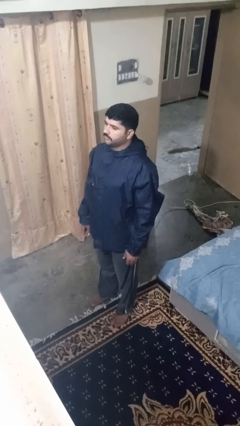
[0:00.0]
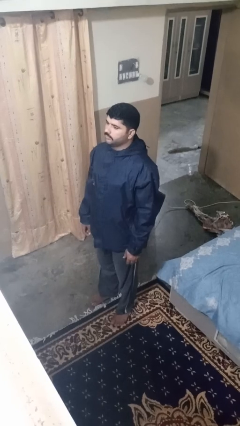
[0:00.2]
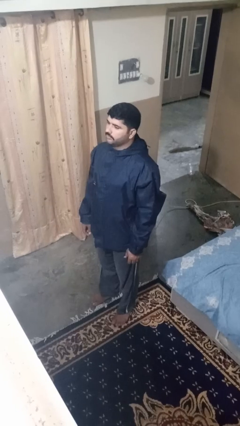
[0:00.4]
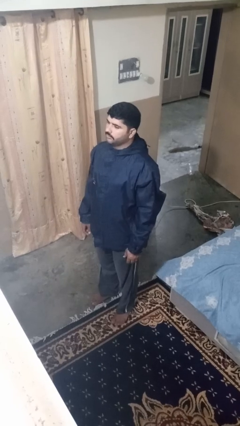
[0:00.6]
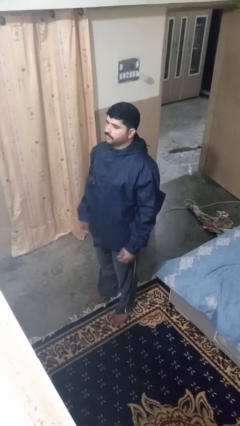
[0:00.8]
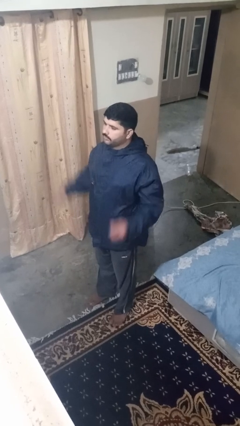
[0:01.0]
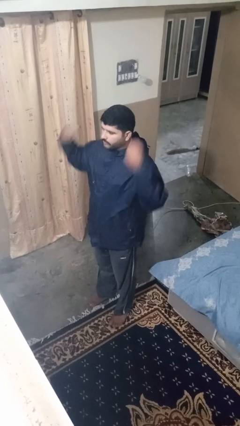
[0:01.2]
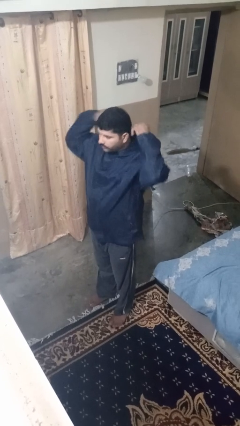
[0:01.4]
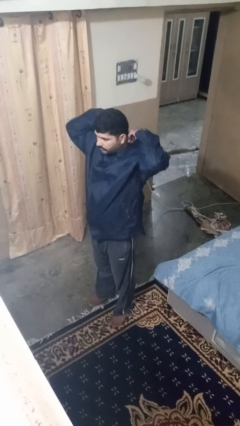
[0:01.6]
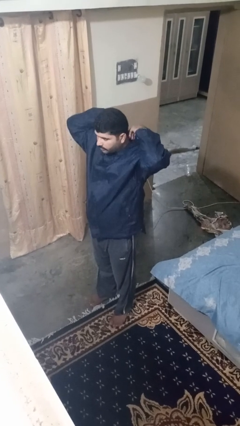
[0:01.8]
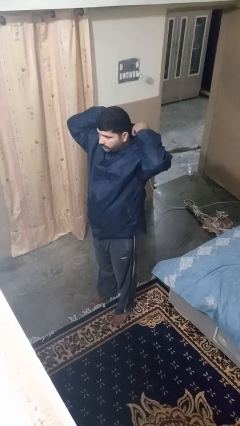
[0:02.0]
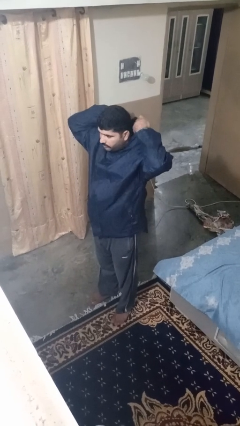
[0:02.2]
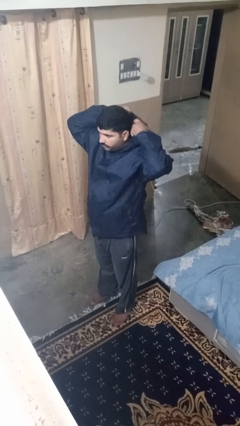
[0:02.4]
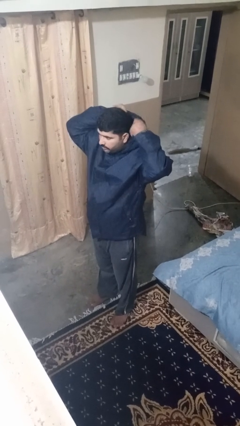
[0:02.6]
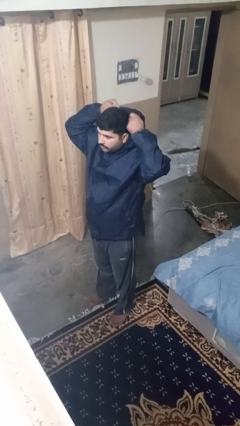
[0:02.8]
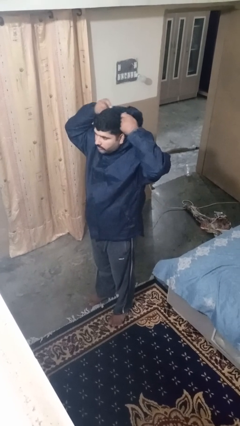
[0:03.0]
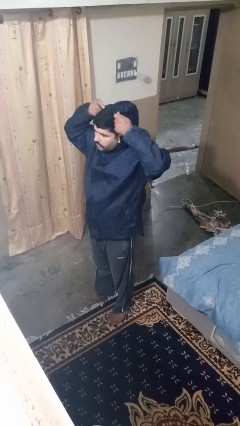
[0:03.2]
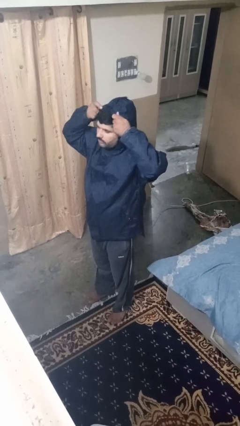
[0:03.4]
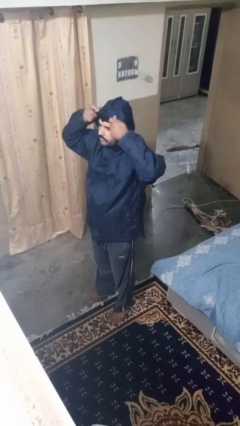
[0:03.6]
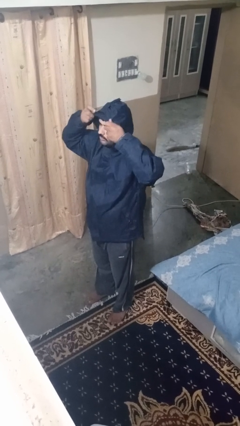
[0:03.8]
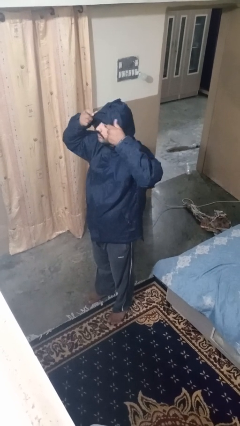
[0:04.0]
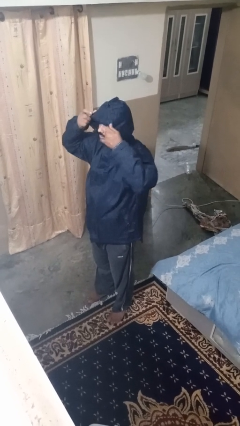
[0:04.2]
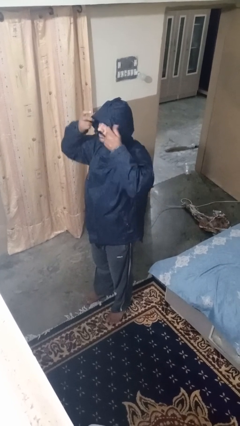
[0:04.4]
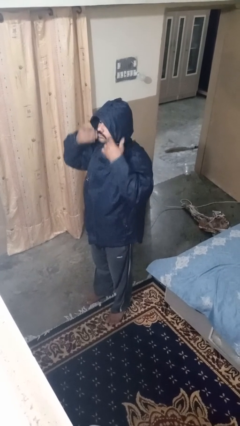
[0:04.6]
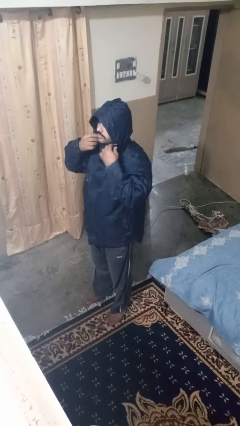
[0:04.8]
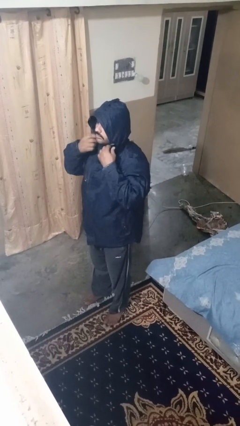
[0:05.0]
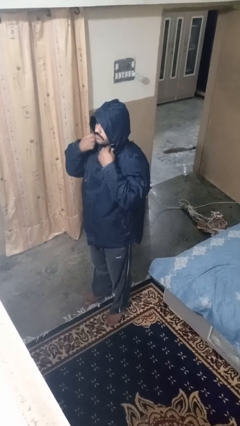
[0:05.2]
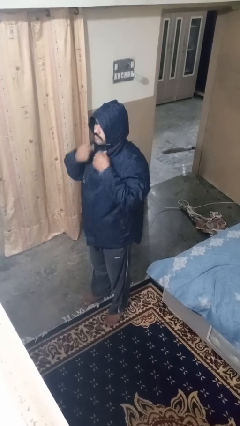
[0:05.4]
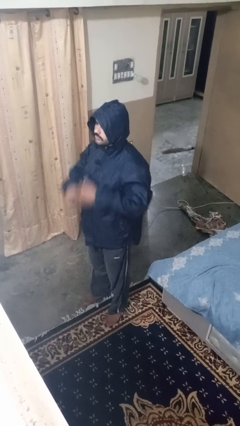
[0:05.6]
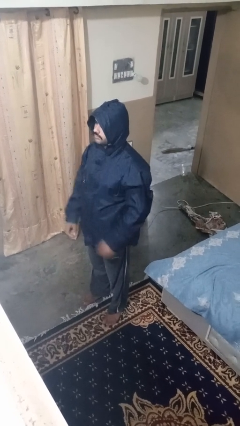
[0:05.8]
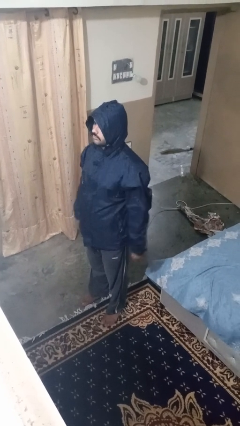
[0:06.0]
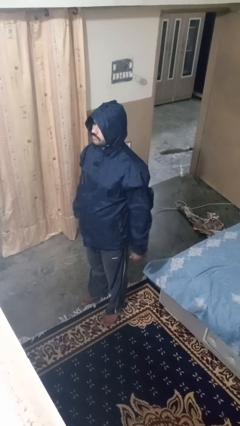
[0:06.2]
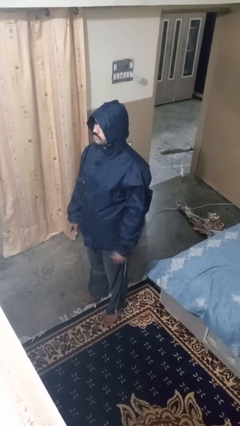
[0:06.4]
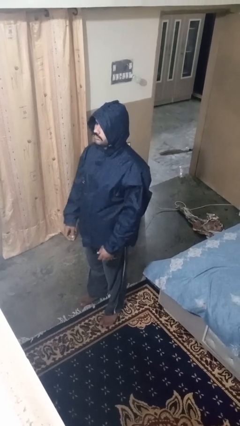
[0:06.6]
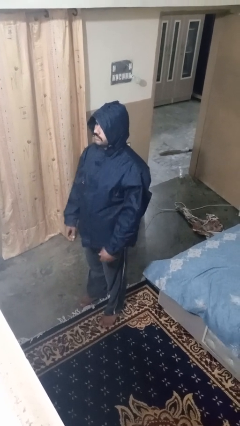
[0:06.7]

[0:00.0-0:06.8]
person puts on hoodie

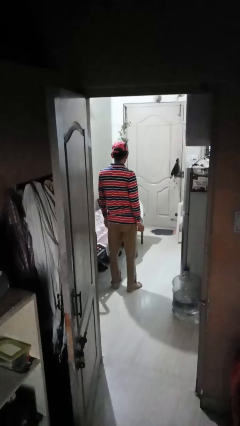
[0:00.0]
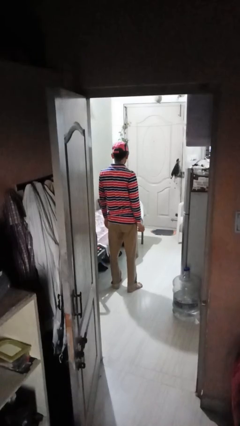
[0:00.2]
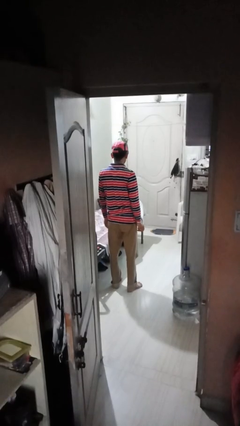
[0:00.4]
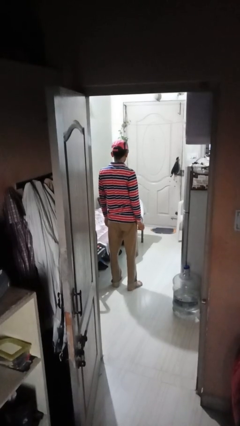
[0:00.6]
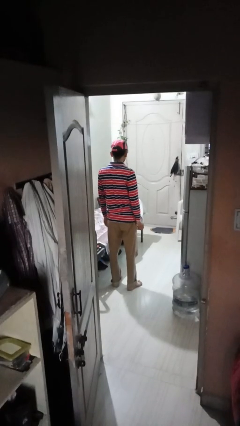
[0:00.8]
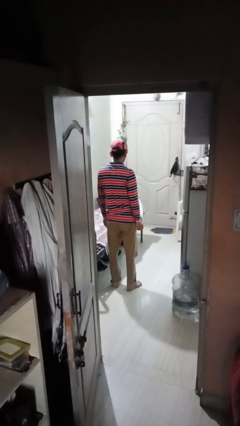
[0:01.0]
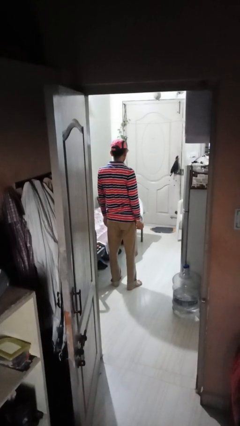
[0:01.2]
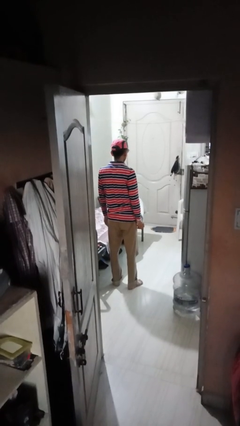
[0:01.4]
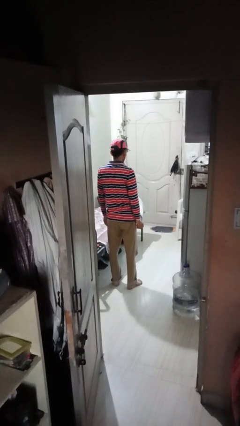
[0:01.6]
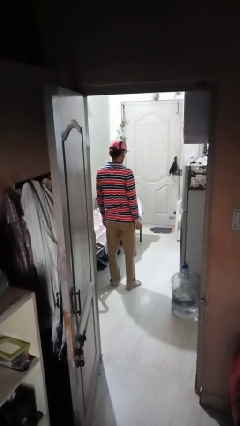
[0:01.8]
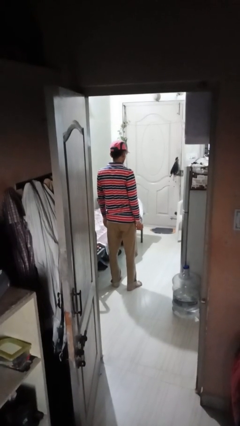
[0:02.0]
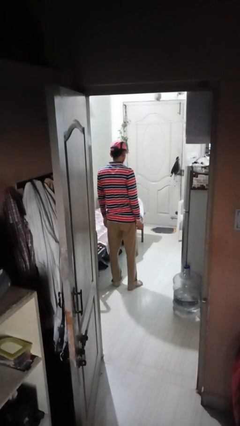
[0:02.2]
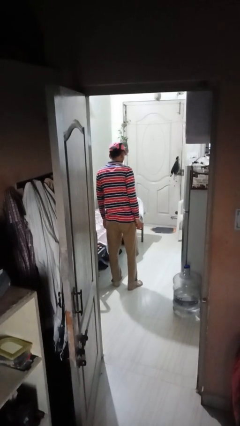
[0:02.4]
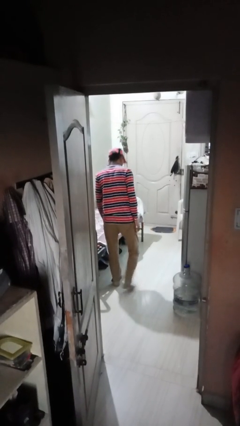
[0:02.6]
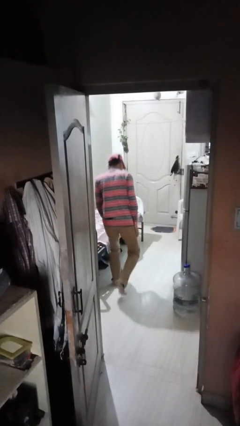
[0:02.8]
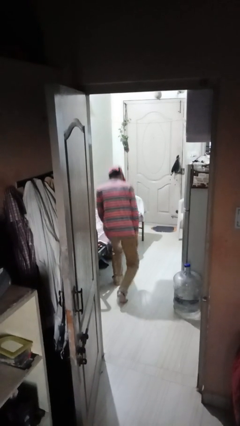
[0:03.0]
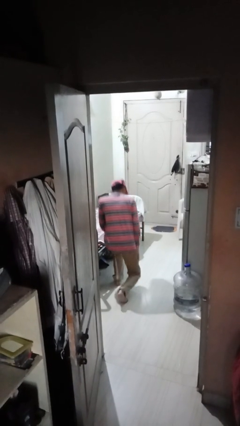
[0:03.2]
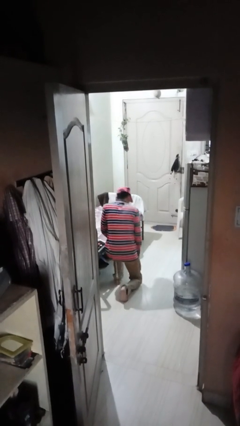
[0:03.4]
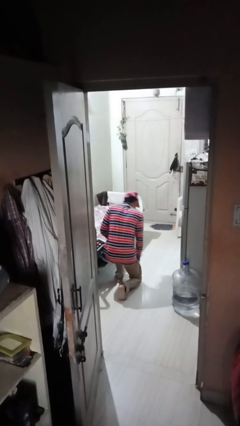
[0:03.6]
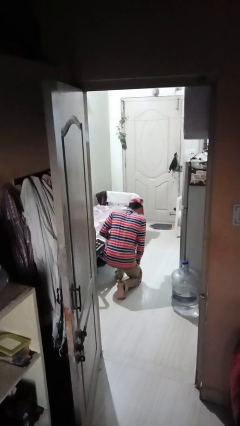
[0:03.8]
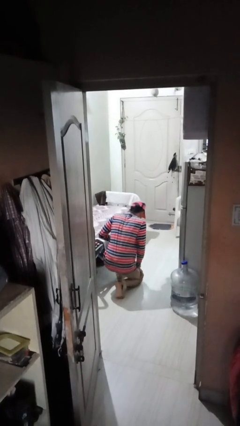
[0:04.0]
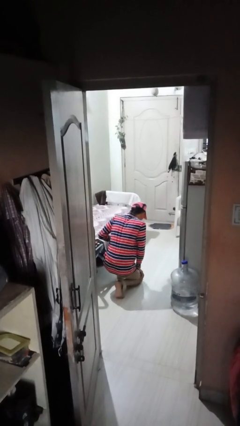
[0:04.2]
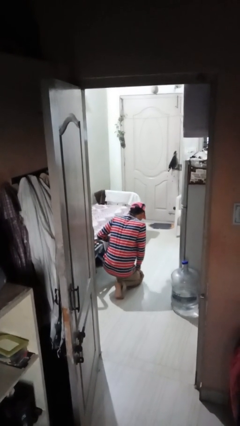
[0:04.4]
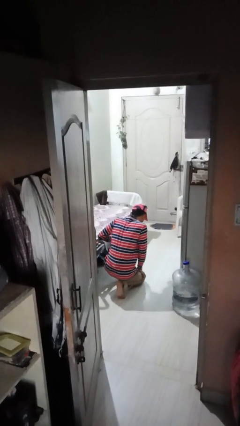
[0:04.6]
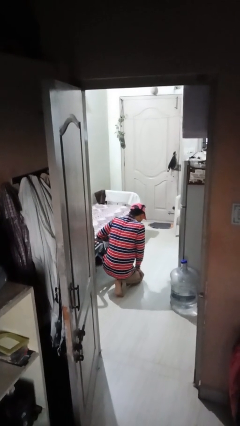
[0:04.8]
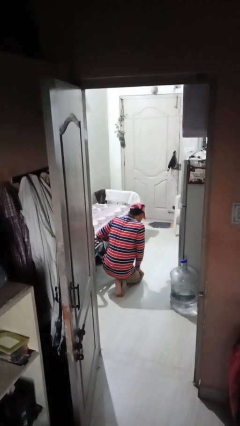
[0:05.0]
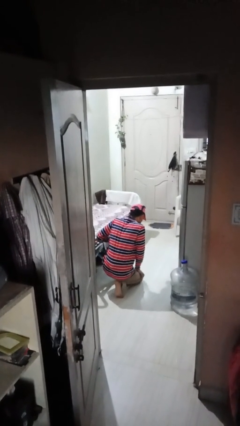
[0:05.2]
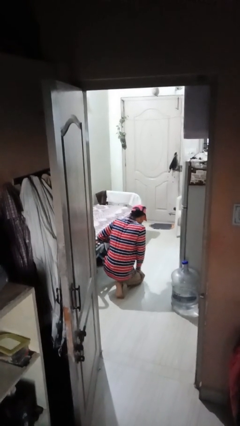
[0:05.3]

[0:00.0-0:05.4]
person kneels

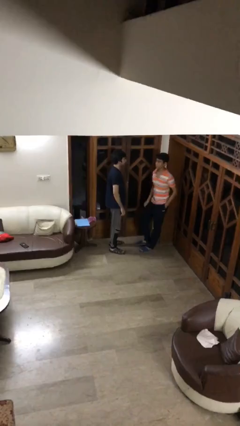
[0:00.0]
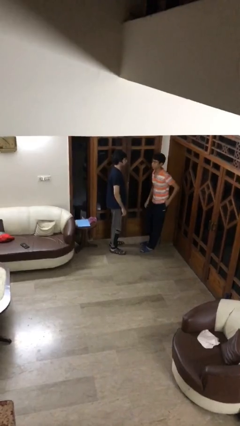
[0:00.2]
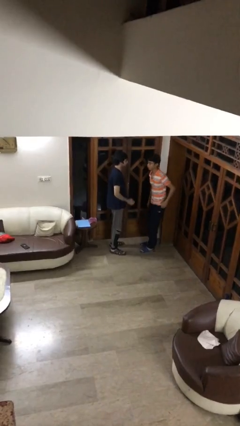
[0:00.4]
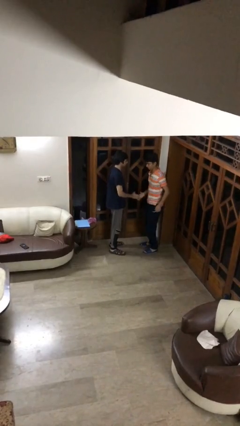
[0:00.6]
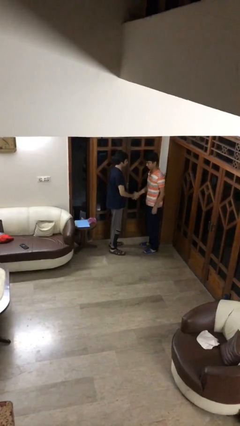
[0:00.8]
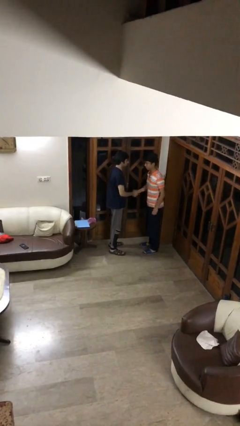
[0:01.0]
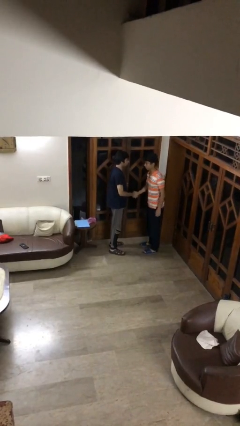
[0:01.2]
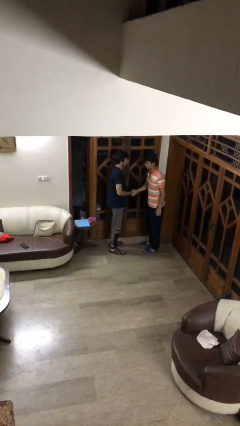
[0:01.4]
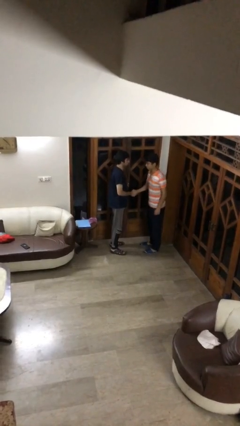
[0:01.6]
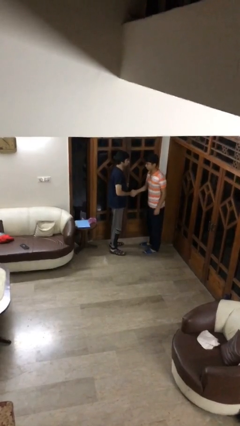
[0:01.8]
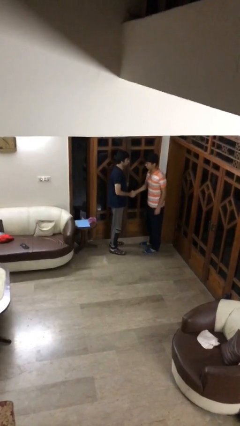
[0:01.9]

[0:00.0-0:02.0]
person shakes hand

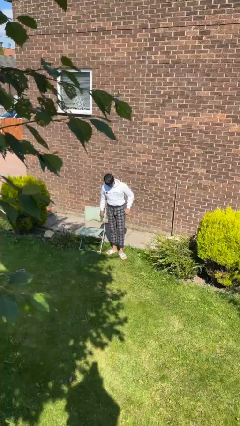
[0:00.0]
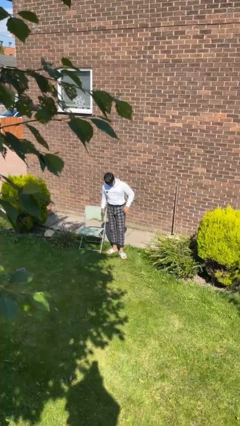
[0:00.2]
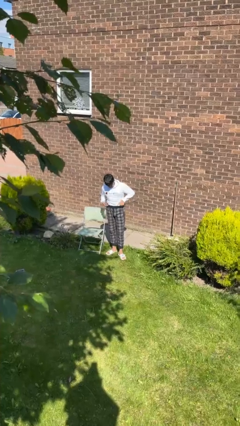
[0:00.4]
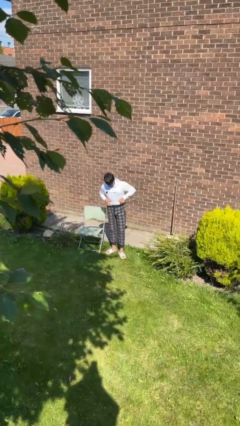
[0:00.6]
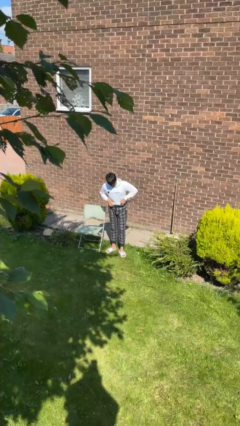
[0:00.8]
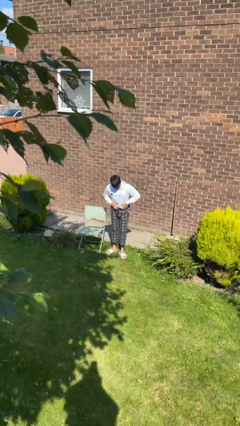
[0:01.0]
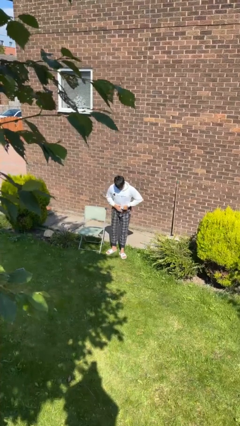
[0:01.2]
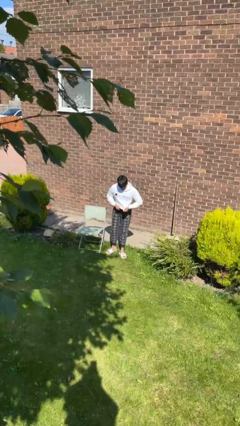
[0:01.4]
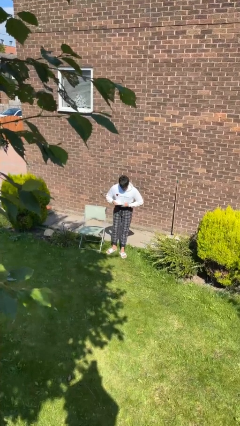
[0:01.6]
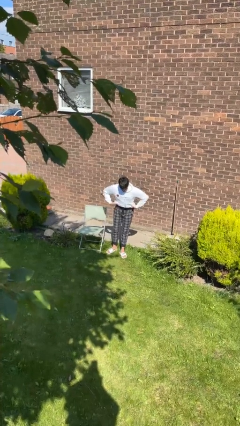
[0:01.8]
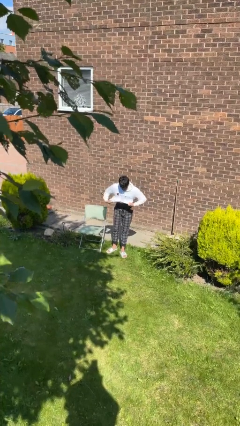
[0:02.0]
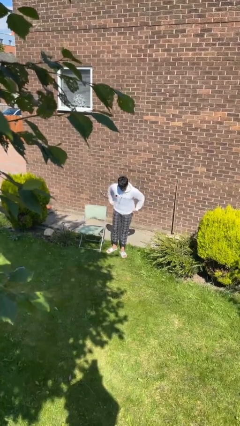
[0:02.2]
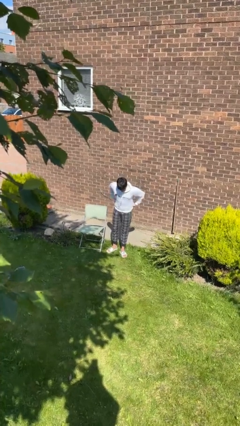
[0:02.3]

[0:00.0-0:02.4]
person untucks shirt

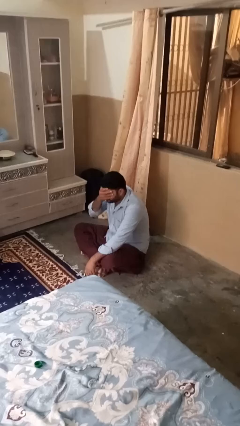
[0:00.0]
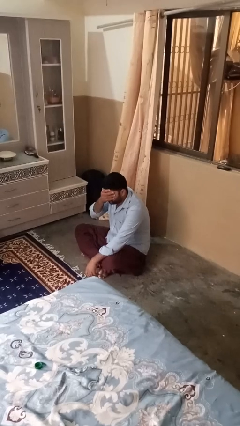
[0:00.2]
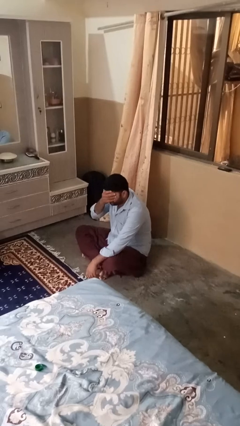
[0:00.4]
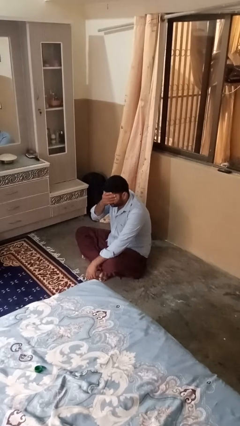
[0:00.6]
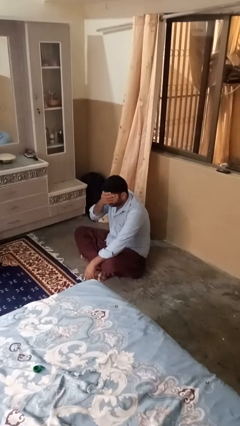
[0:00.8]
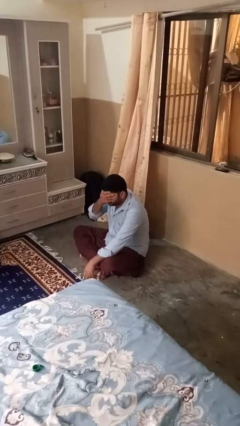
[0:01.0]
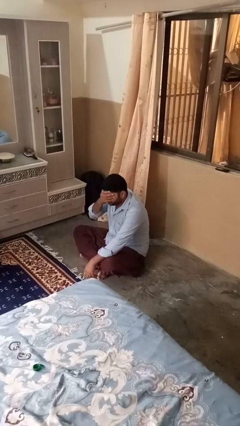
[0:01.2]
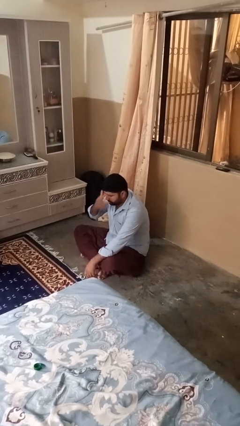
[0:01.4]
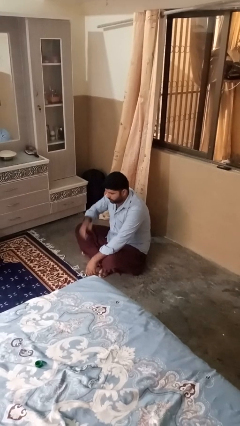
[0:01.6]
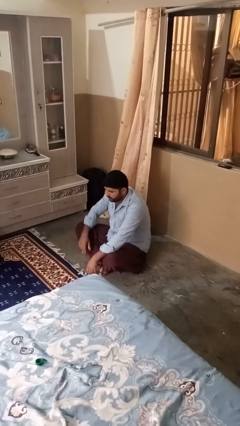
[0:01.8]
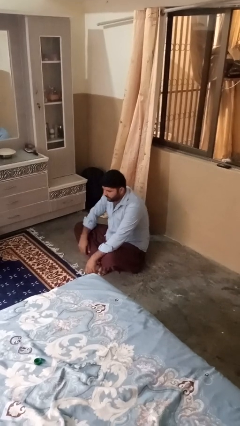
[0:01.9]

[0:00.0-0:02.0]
person covers face with hands
